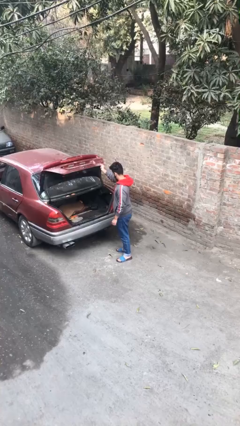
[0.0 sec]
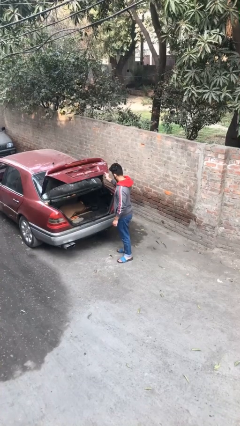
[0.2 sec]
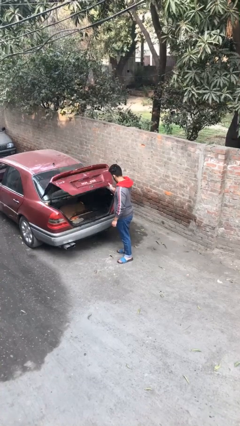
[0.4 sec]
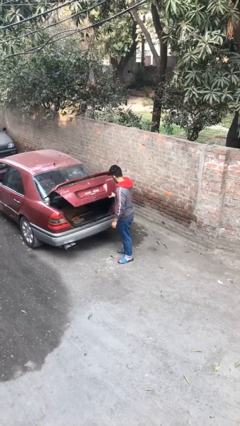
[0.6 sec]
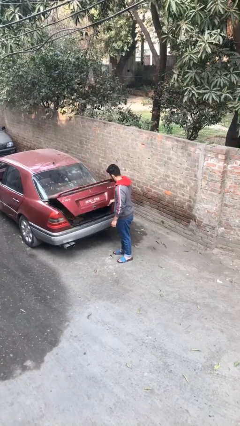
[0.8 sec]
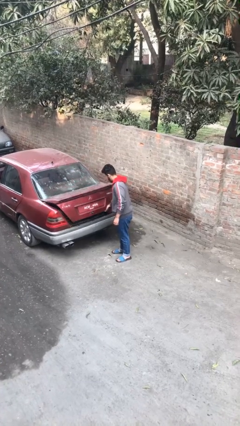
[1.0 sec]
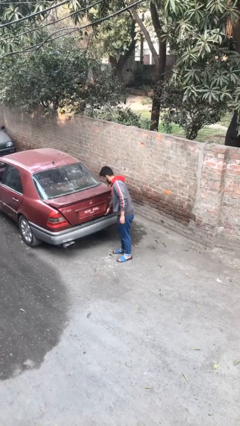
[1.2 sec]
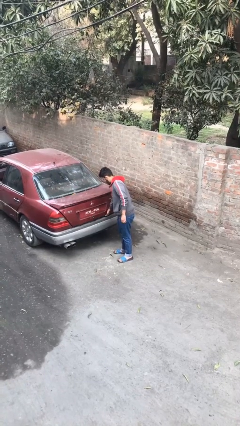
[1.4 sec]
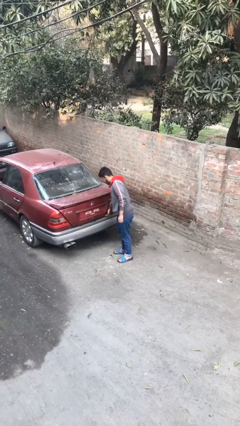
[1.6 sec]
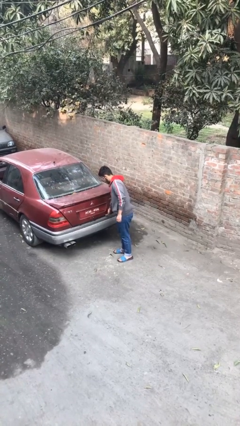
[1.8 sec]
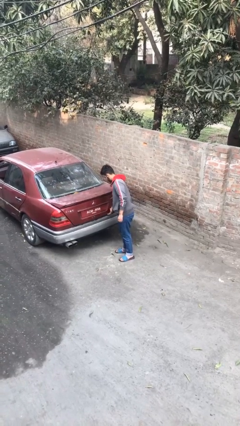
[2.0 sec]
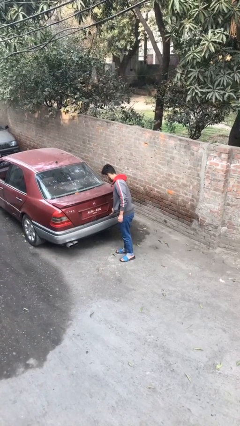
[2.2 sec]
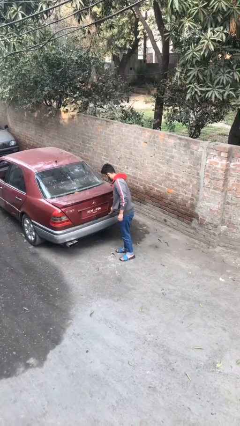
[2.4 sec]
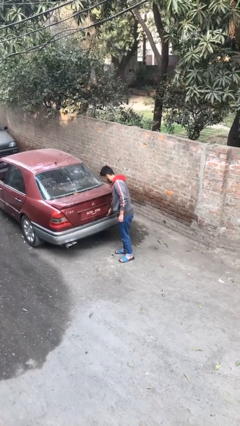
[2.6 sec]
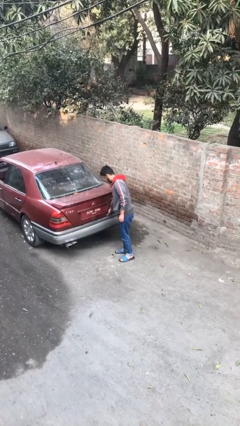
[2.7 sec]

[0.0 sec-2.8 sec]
person closes car trunk

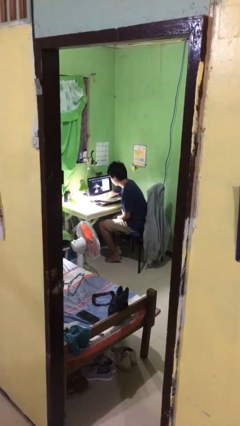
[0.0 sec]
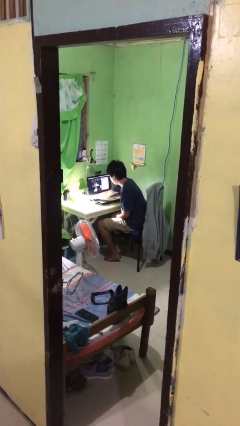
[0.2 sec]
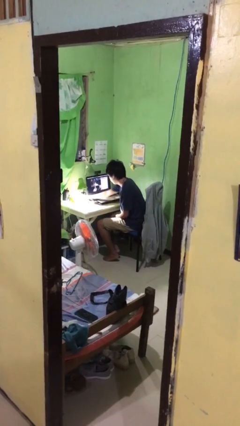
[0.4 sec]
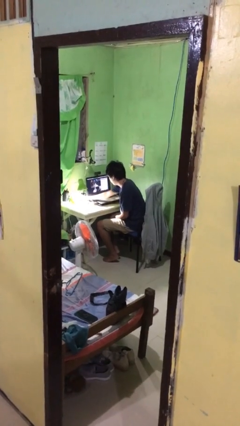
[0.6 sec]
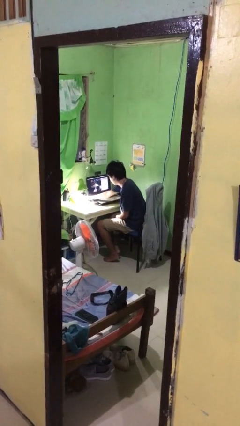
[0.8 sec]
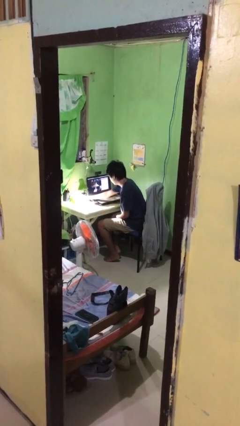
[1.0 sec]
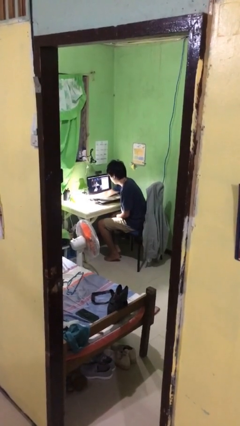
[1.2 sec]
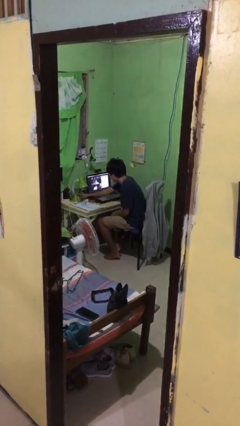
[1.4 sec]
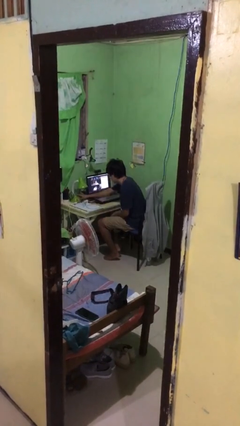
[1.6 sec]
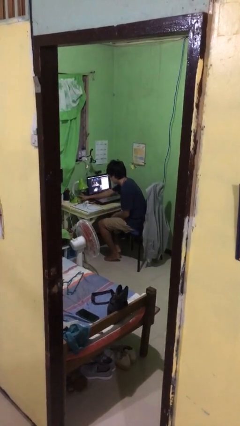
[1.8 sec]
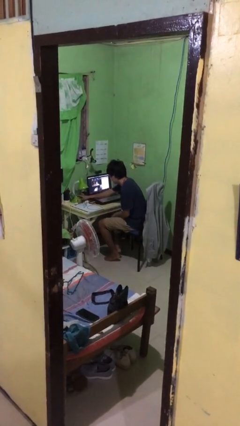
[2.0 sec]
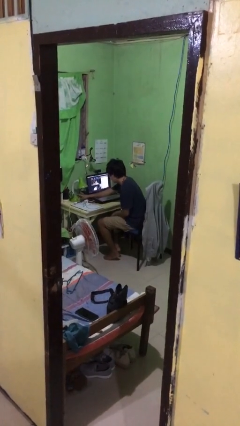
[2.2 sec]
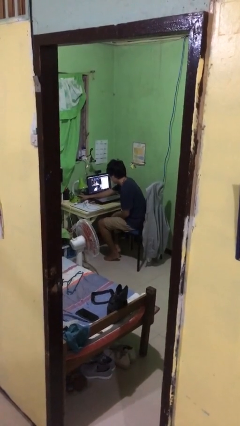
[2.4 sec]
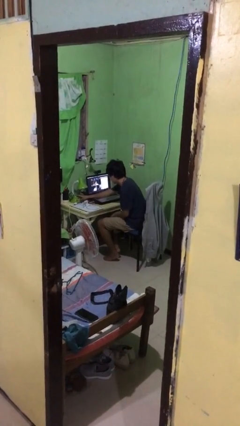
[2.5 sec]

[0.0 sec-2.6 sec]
person turns off lamp

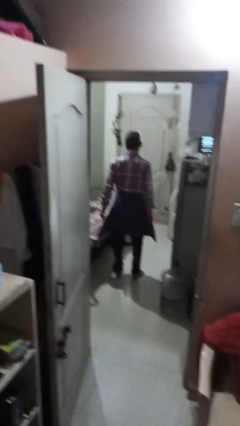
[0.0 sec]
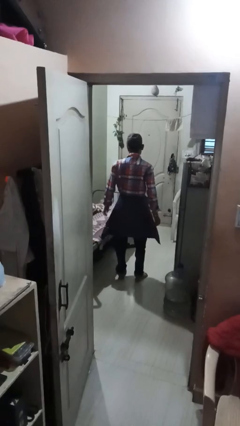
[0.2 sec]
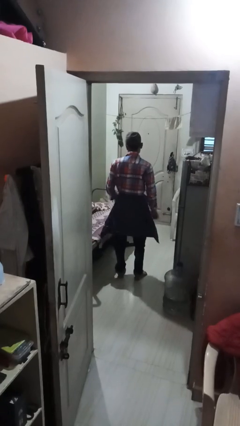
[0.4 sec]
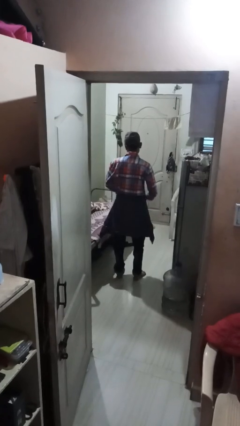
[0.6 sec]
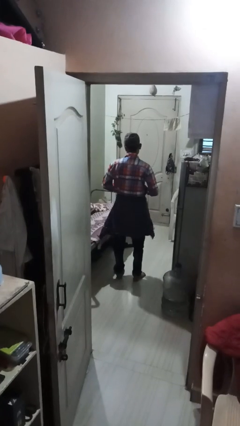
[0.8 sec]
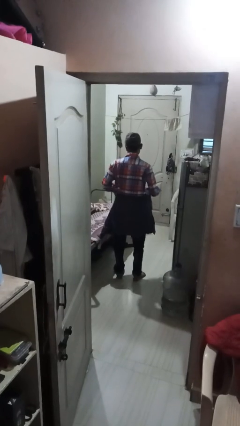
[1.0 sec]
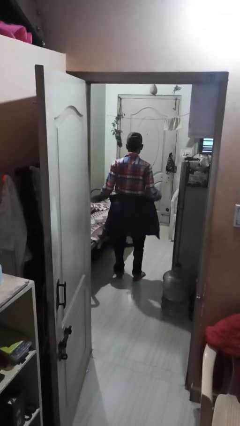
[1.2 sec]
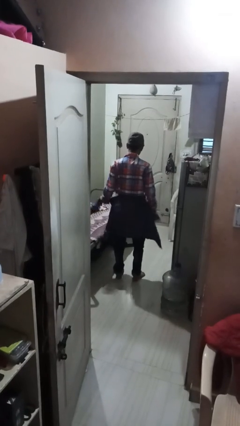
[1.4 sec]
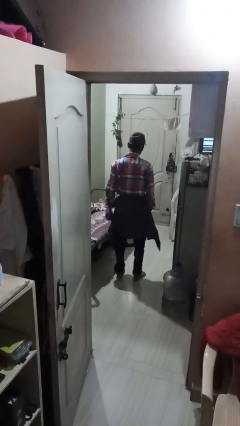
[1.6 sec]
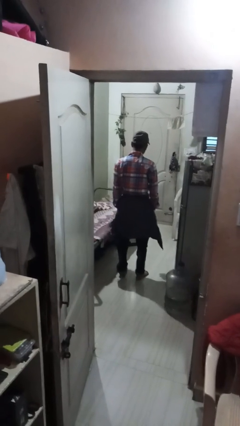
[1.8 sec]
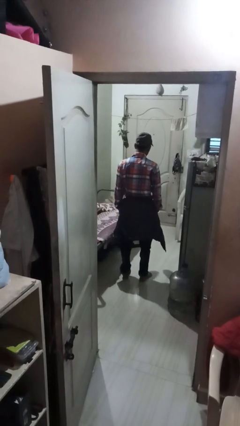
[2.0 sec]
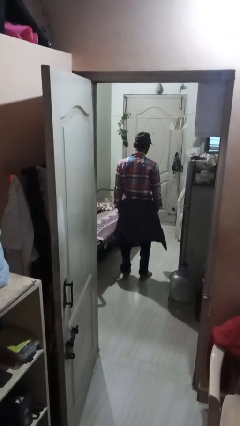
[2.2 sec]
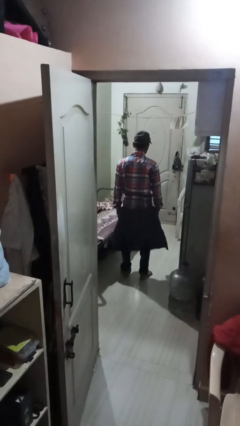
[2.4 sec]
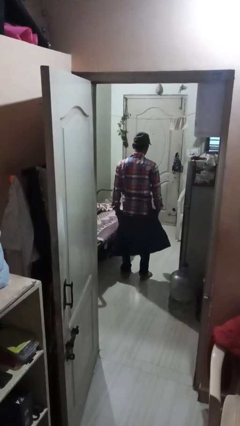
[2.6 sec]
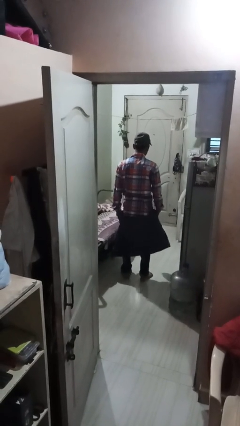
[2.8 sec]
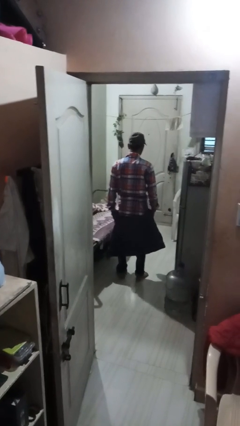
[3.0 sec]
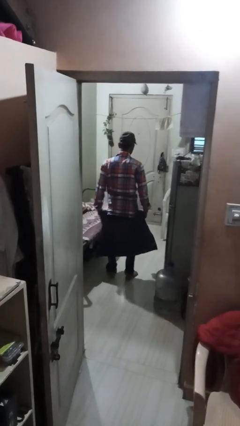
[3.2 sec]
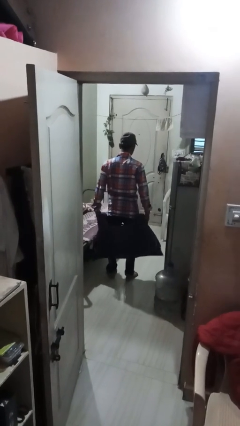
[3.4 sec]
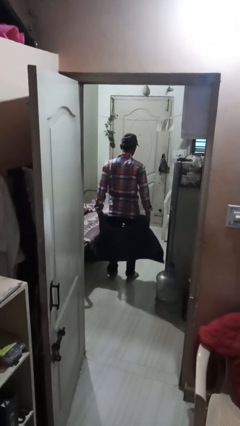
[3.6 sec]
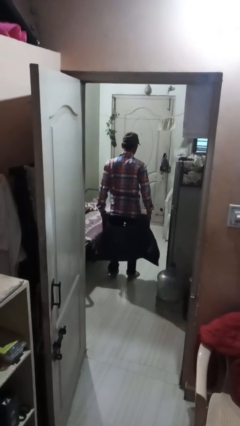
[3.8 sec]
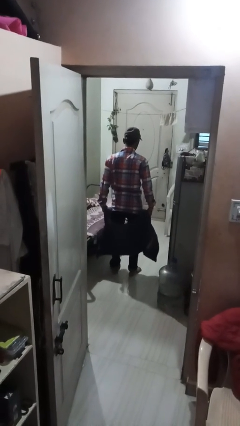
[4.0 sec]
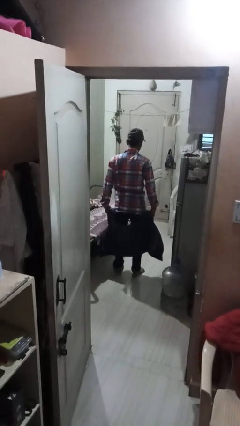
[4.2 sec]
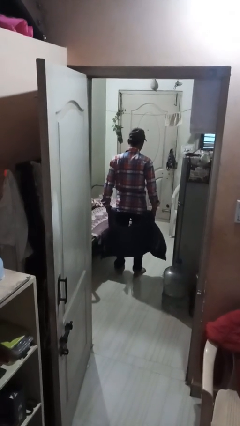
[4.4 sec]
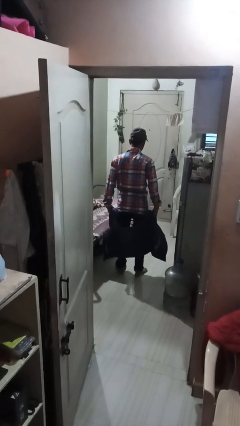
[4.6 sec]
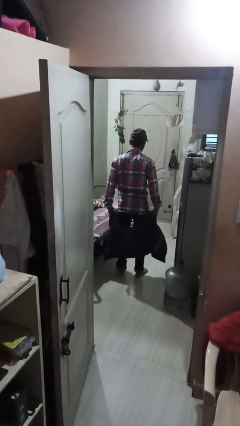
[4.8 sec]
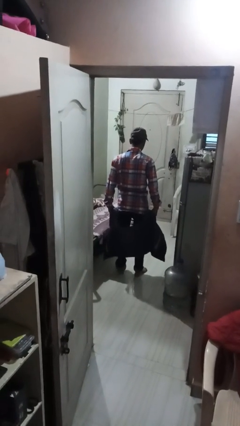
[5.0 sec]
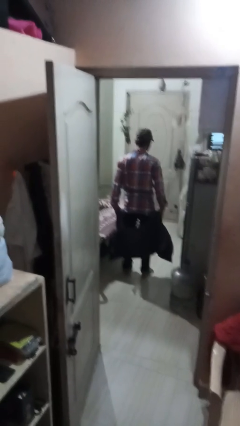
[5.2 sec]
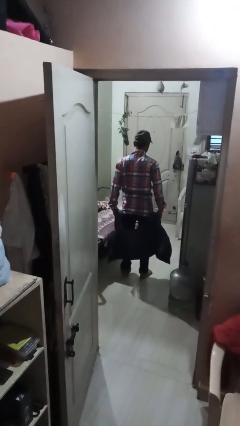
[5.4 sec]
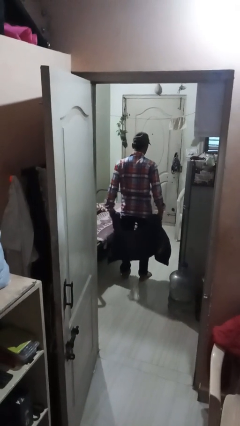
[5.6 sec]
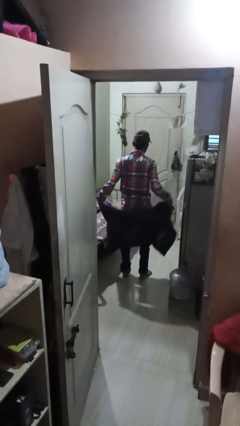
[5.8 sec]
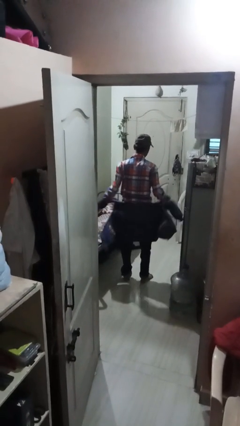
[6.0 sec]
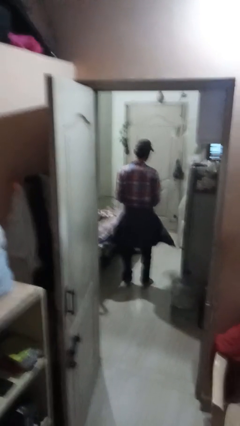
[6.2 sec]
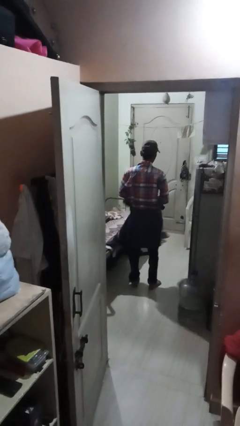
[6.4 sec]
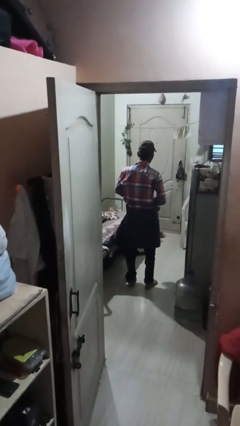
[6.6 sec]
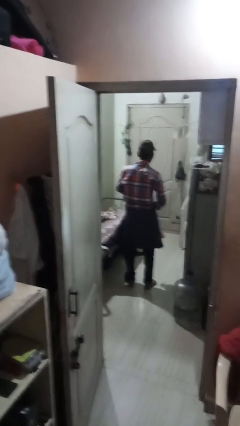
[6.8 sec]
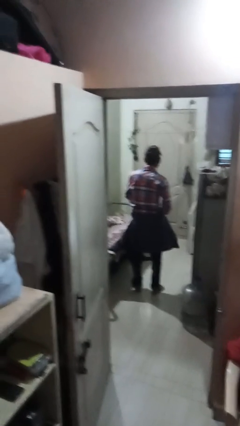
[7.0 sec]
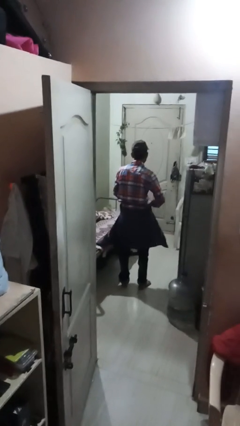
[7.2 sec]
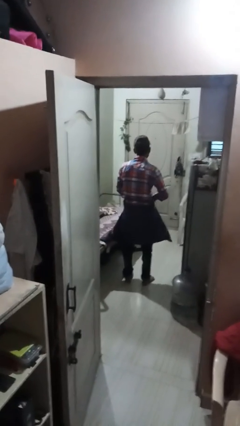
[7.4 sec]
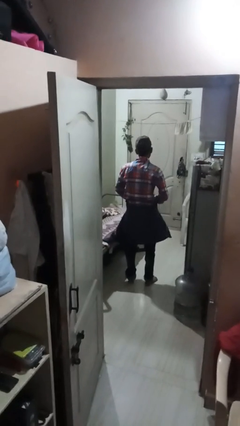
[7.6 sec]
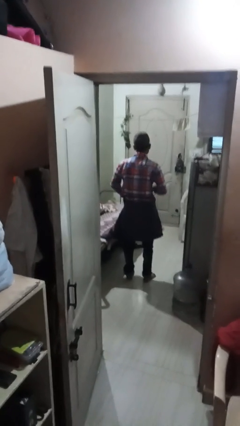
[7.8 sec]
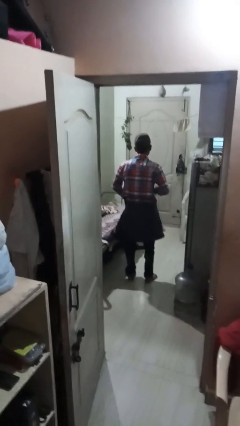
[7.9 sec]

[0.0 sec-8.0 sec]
person unties jacket around waist

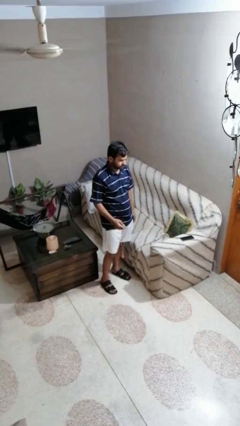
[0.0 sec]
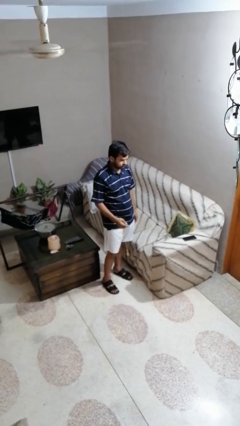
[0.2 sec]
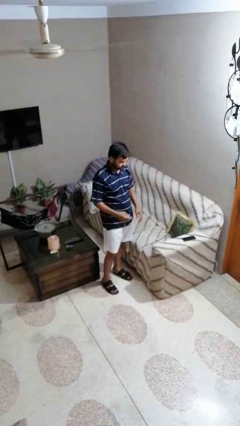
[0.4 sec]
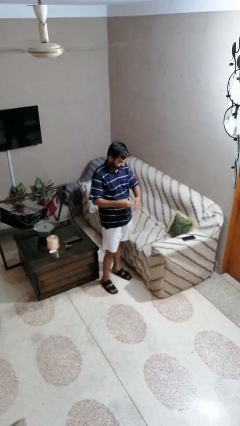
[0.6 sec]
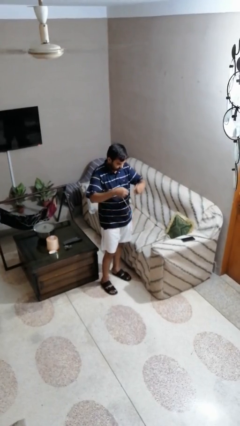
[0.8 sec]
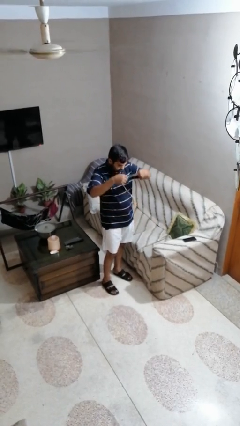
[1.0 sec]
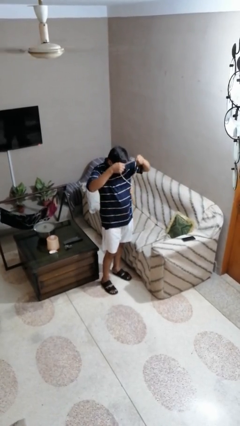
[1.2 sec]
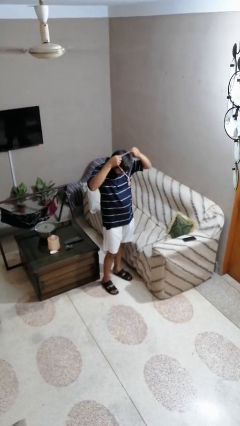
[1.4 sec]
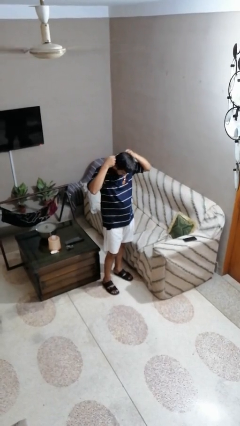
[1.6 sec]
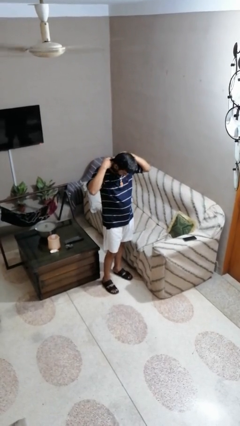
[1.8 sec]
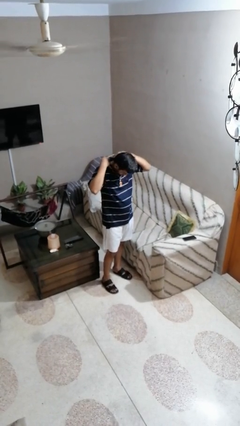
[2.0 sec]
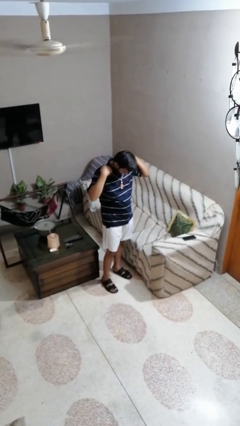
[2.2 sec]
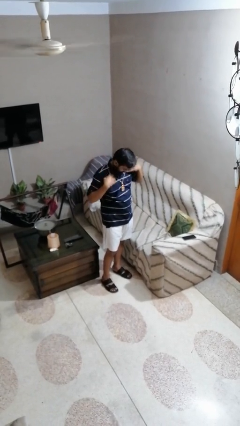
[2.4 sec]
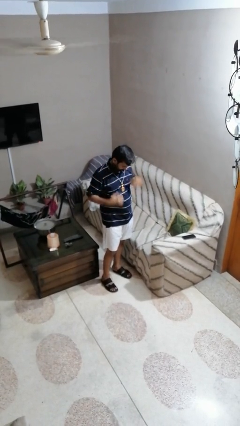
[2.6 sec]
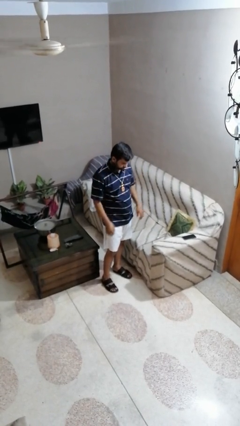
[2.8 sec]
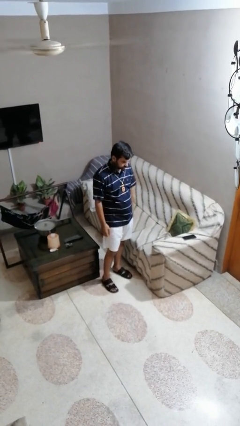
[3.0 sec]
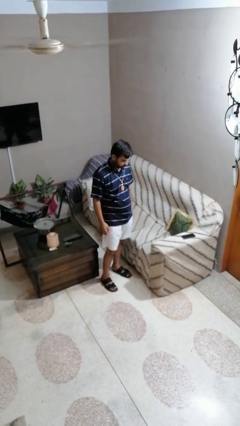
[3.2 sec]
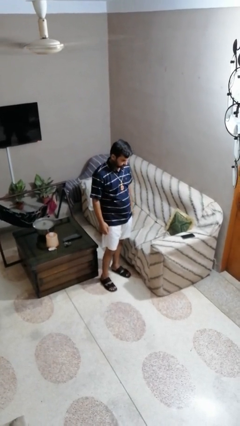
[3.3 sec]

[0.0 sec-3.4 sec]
person puts on necklace

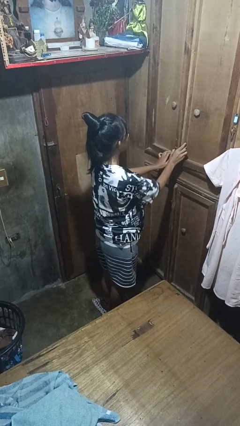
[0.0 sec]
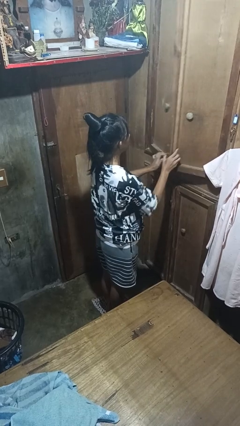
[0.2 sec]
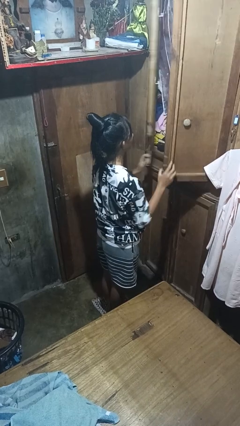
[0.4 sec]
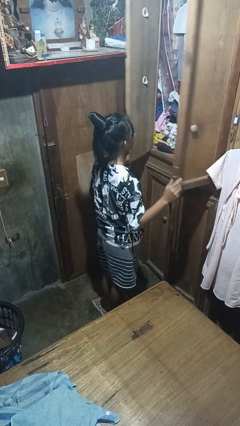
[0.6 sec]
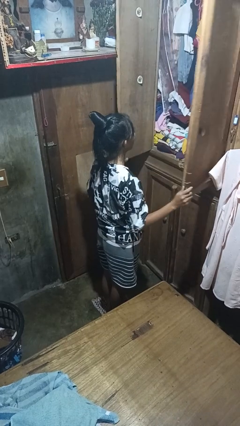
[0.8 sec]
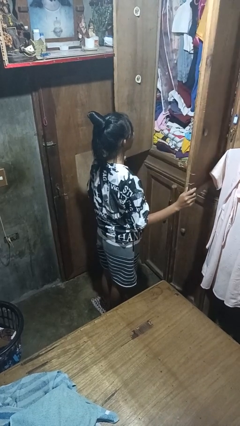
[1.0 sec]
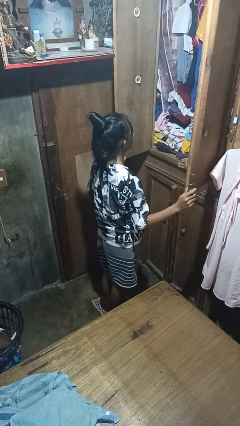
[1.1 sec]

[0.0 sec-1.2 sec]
person opens closet door
